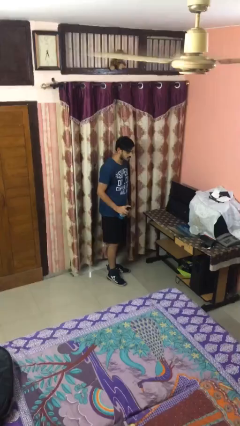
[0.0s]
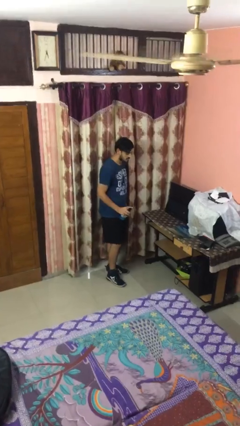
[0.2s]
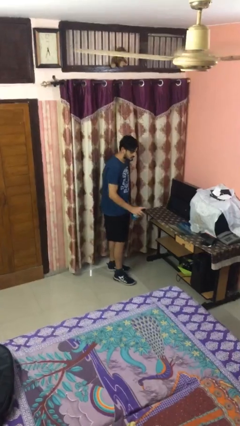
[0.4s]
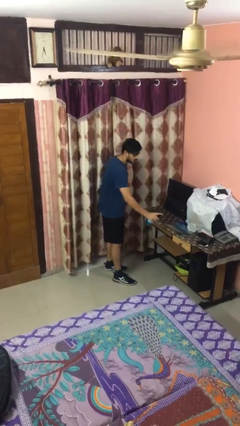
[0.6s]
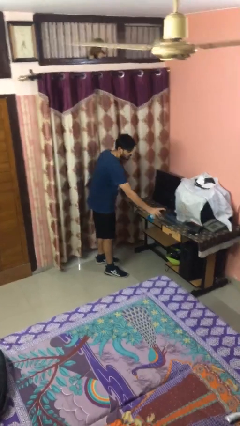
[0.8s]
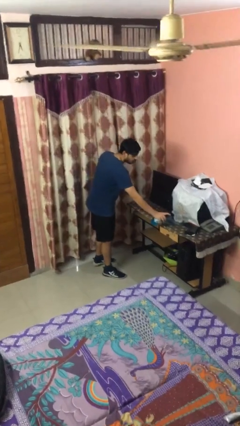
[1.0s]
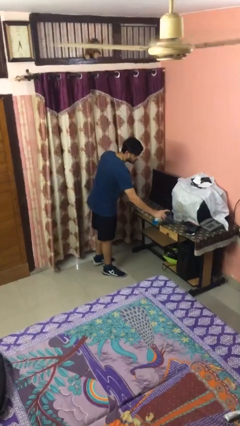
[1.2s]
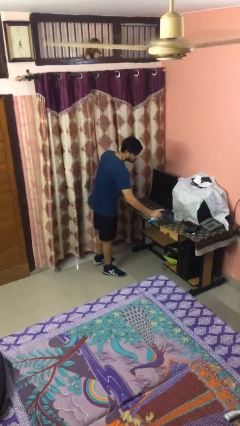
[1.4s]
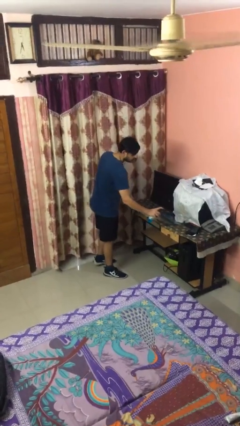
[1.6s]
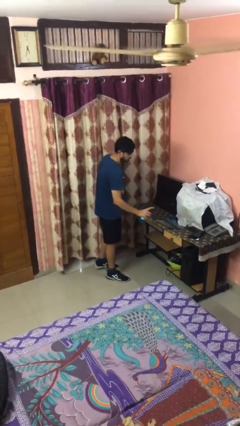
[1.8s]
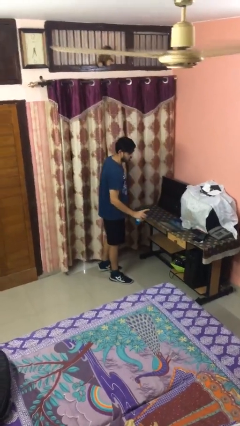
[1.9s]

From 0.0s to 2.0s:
person sprays from bottle

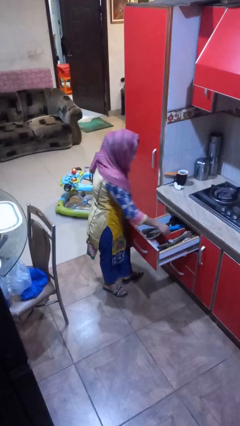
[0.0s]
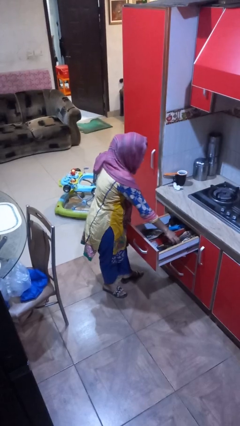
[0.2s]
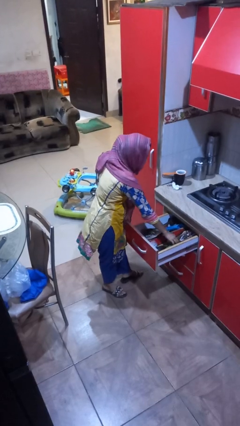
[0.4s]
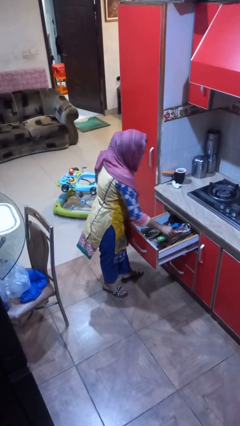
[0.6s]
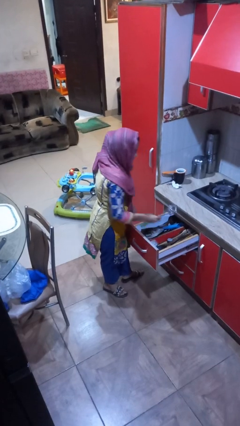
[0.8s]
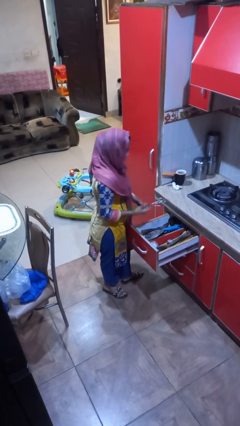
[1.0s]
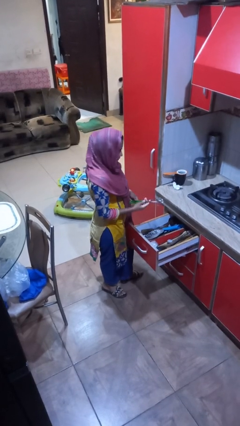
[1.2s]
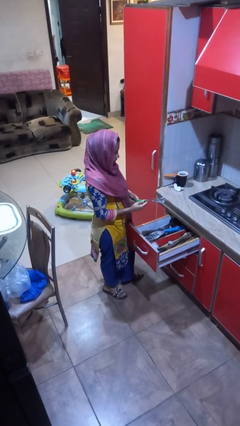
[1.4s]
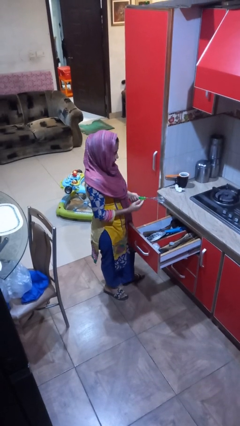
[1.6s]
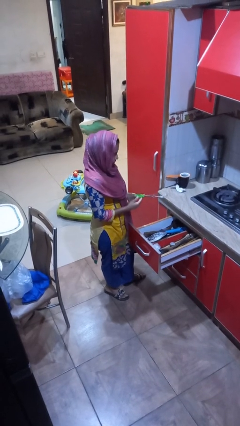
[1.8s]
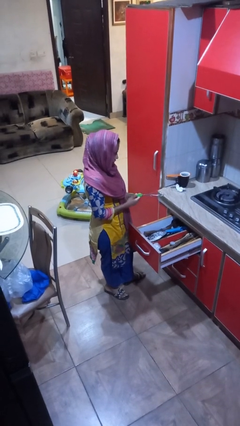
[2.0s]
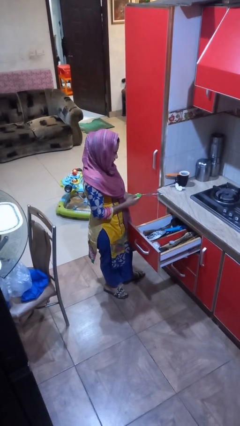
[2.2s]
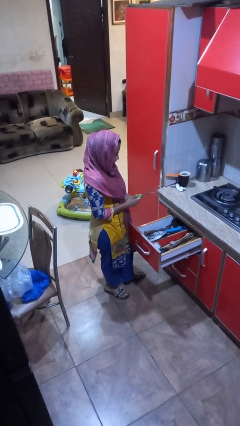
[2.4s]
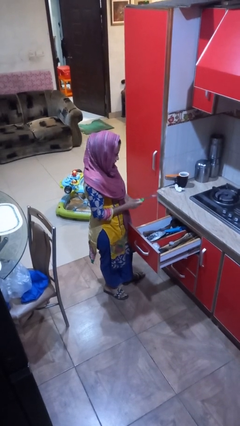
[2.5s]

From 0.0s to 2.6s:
person takes object from kitchen drawer

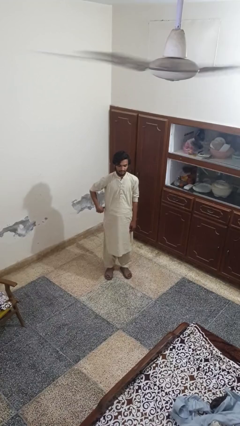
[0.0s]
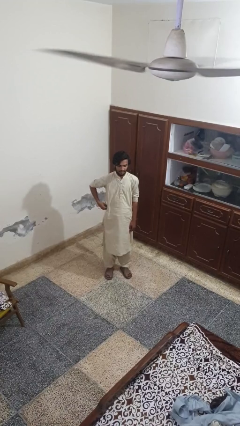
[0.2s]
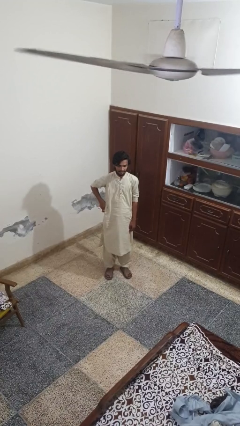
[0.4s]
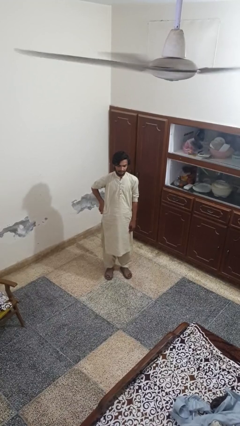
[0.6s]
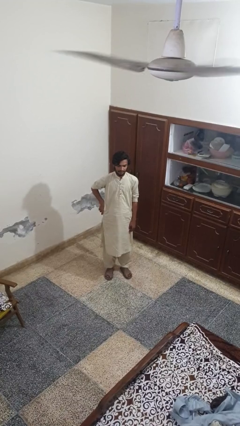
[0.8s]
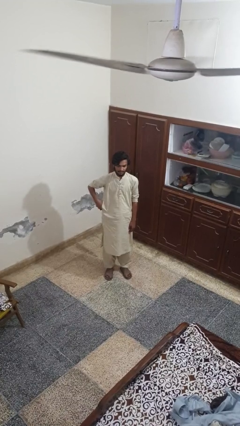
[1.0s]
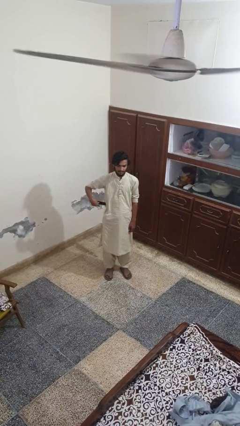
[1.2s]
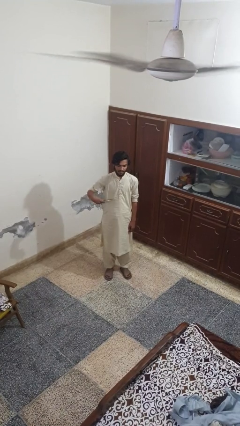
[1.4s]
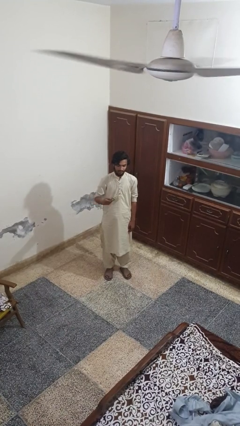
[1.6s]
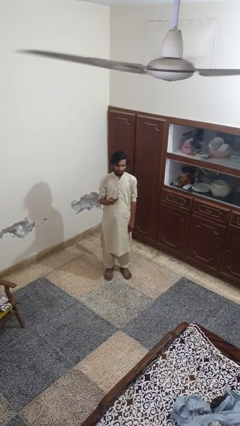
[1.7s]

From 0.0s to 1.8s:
person takes phone from pocket

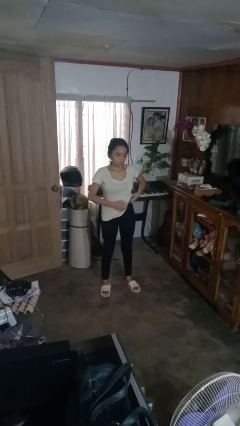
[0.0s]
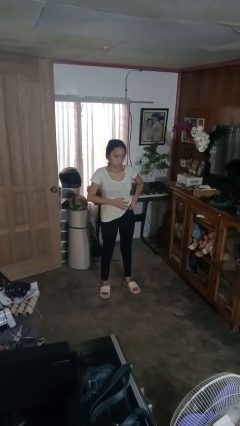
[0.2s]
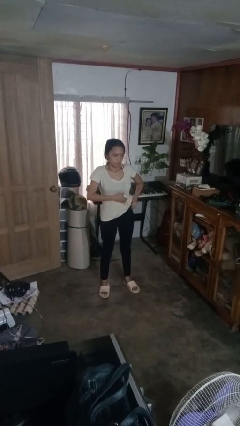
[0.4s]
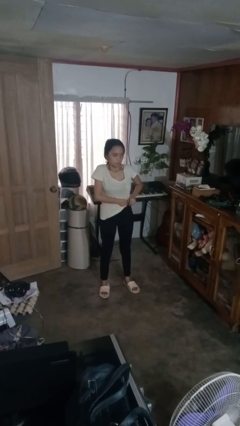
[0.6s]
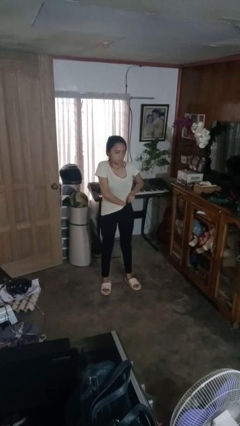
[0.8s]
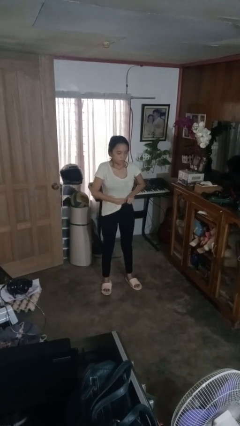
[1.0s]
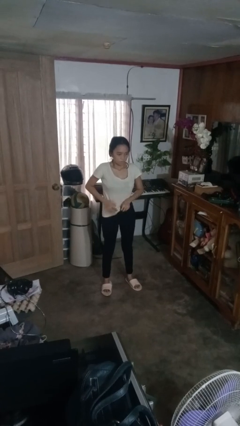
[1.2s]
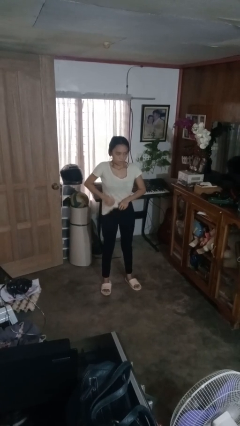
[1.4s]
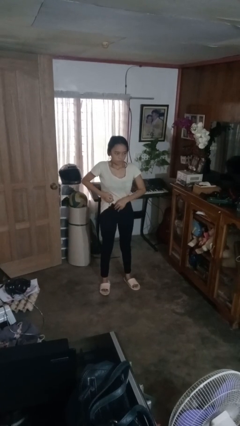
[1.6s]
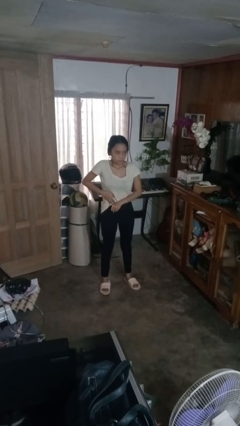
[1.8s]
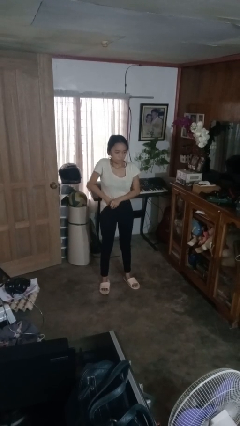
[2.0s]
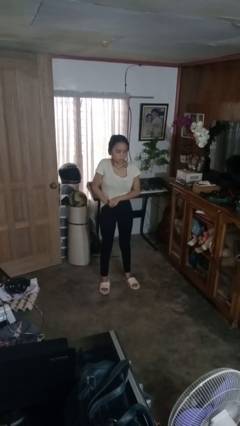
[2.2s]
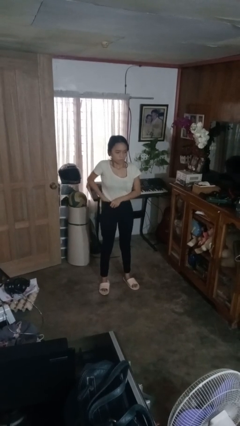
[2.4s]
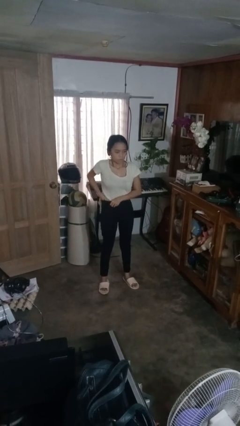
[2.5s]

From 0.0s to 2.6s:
person tucks in shirt

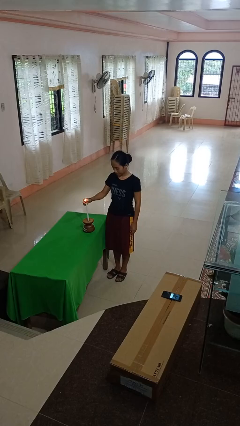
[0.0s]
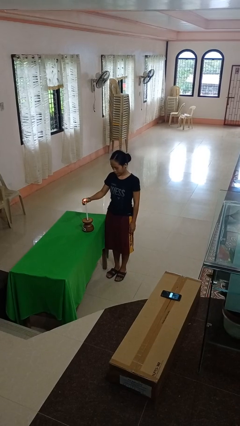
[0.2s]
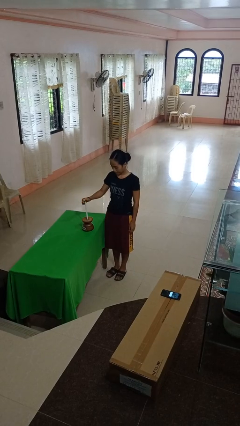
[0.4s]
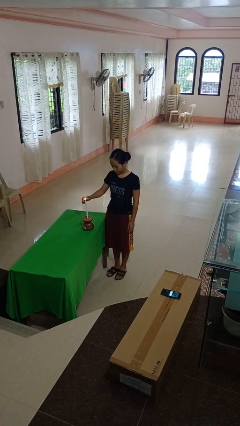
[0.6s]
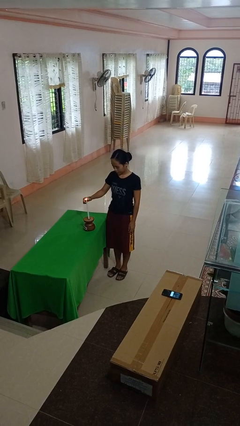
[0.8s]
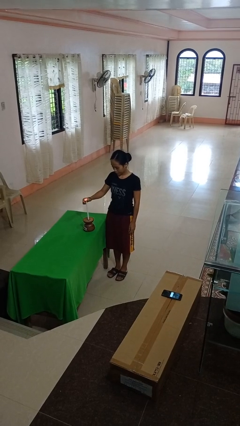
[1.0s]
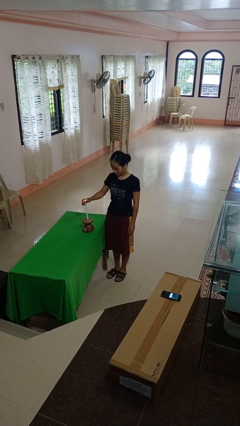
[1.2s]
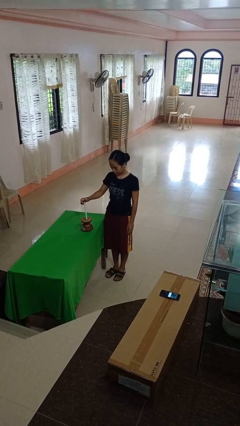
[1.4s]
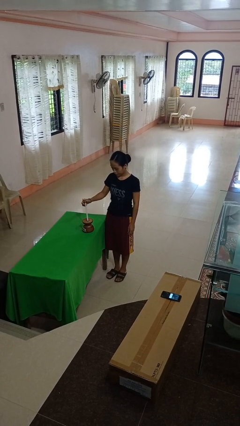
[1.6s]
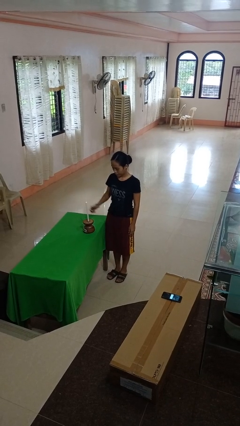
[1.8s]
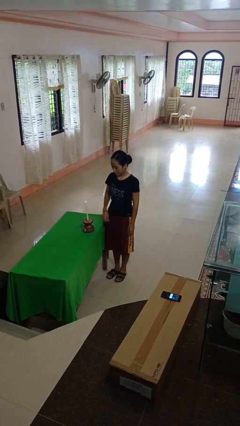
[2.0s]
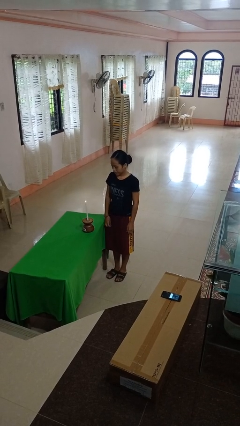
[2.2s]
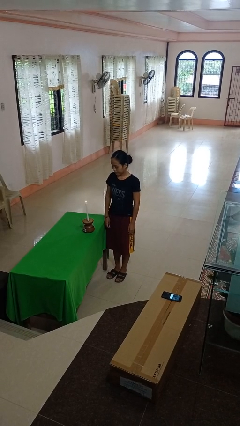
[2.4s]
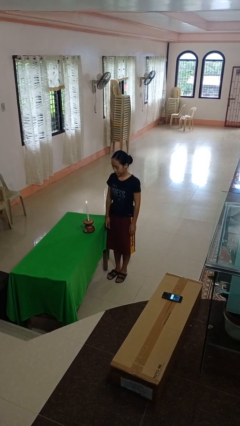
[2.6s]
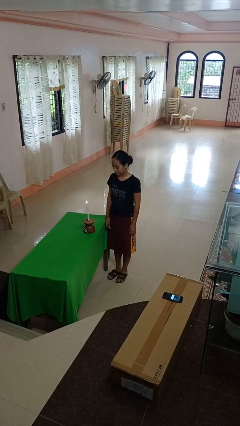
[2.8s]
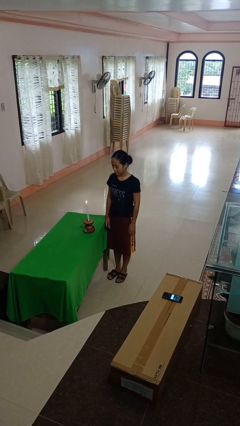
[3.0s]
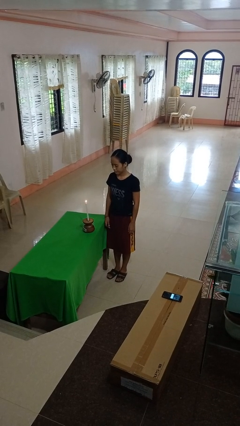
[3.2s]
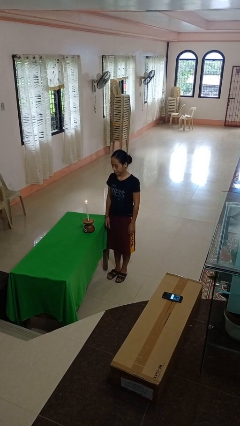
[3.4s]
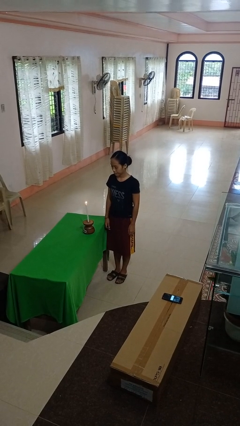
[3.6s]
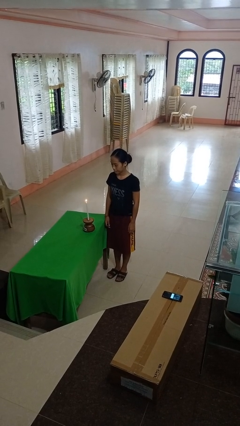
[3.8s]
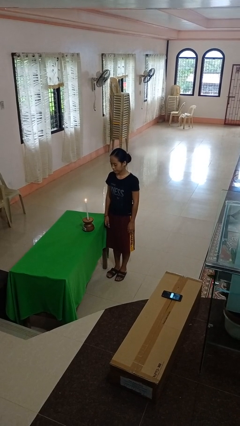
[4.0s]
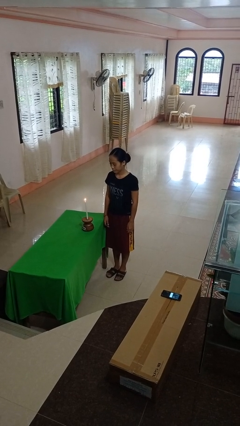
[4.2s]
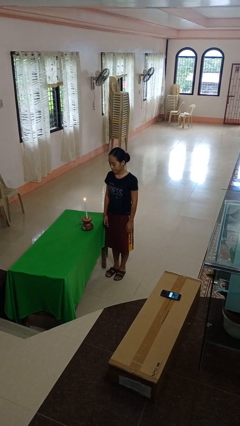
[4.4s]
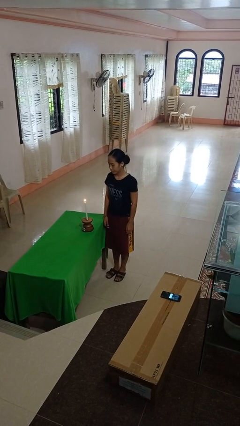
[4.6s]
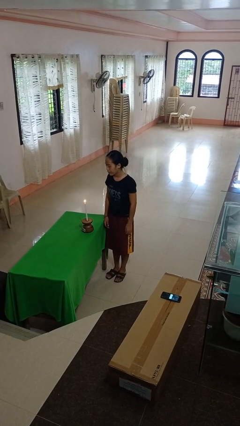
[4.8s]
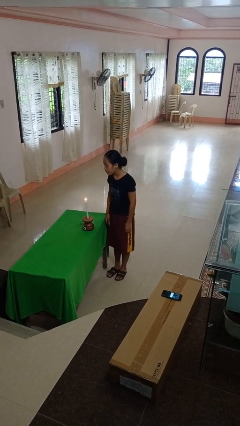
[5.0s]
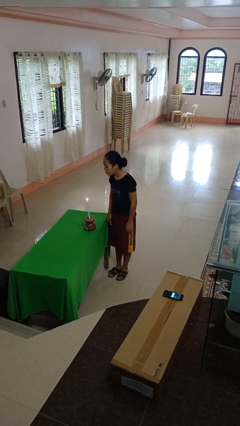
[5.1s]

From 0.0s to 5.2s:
person lights candle

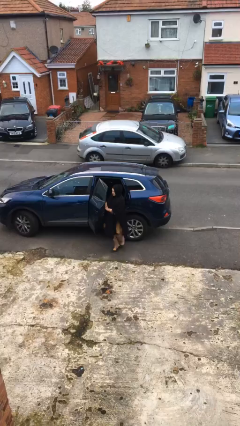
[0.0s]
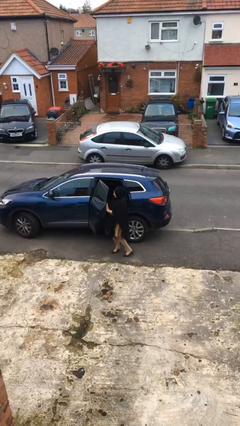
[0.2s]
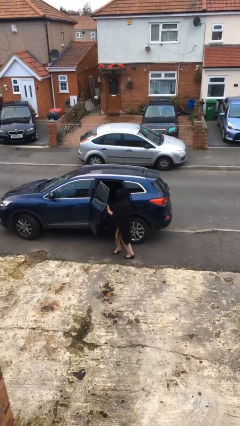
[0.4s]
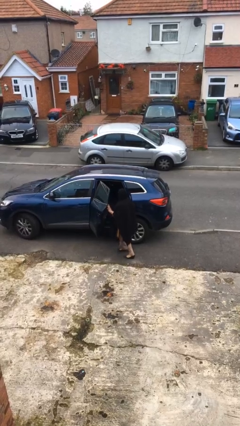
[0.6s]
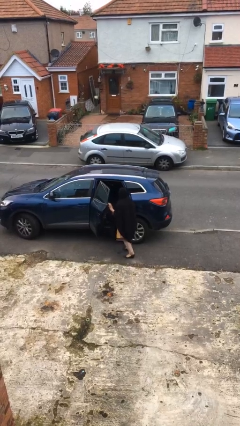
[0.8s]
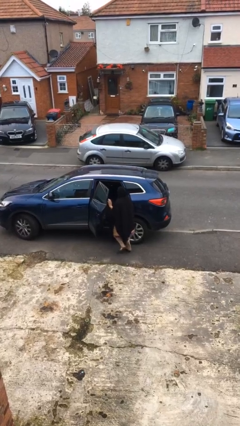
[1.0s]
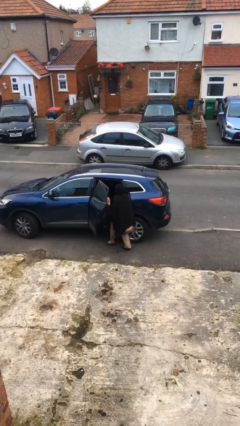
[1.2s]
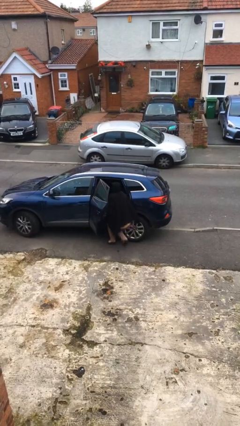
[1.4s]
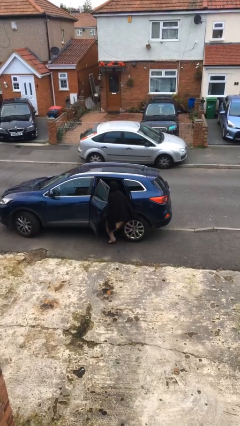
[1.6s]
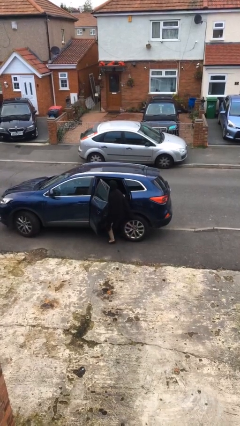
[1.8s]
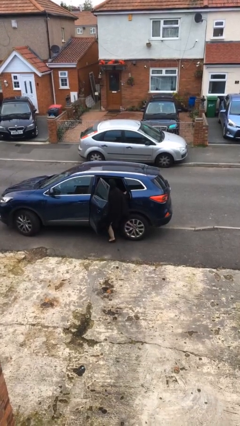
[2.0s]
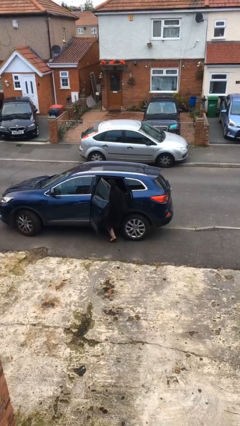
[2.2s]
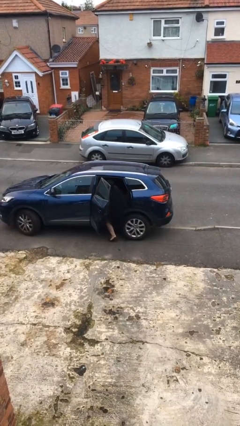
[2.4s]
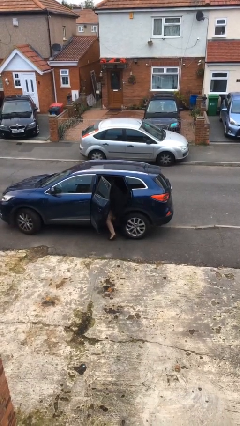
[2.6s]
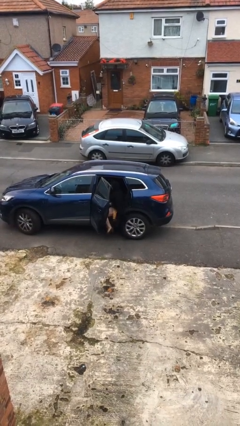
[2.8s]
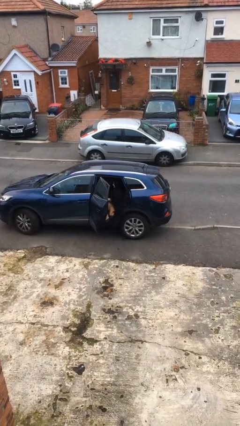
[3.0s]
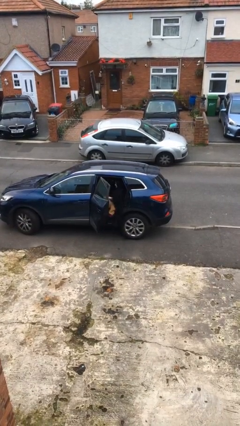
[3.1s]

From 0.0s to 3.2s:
person enters car
